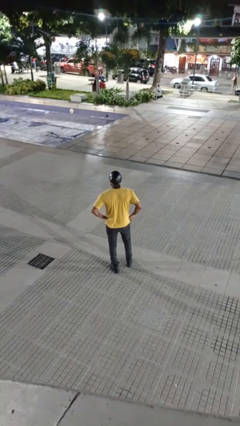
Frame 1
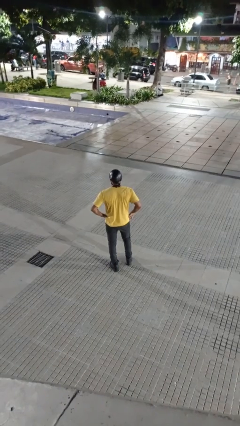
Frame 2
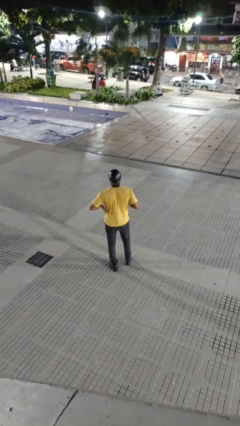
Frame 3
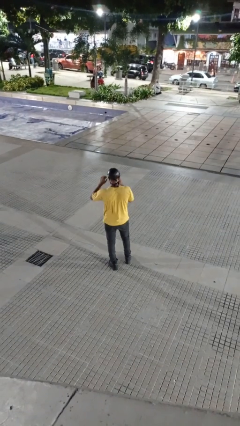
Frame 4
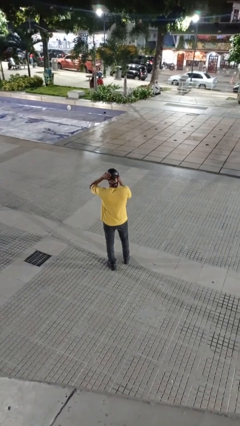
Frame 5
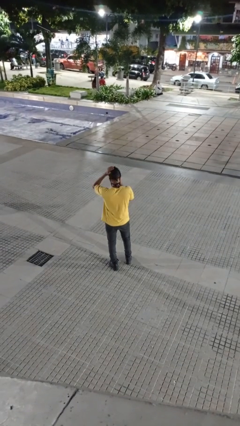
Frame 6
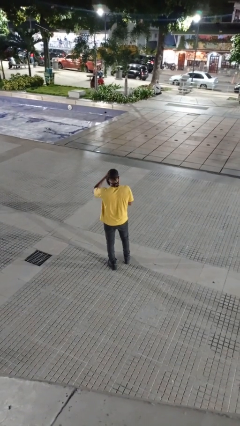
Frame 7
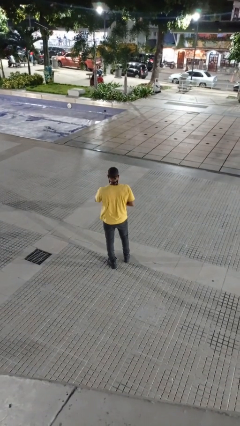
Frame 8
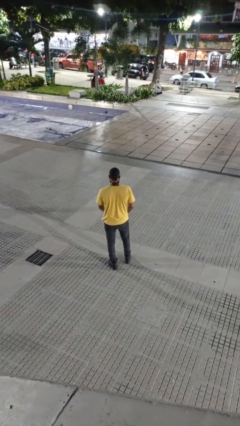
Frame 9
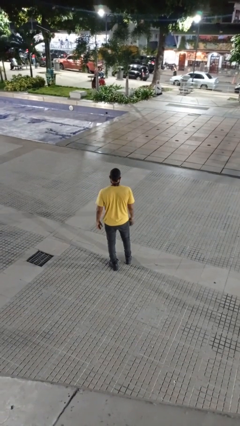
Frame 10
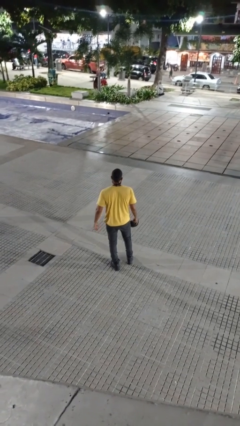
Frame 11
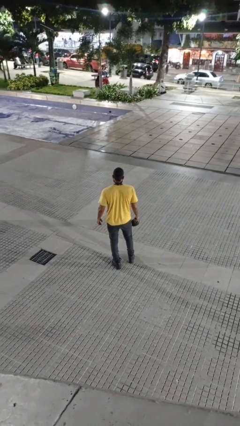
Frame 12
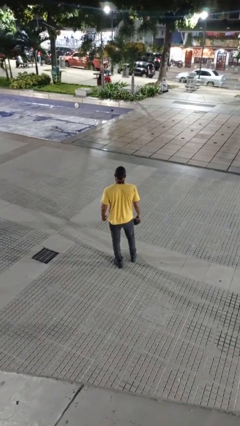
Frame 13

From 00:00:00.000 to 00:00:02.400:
person takes off hat

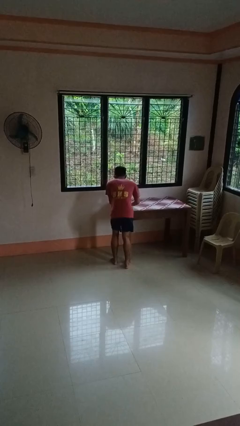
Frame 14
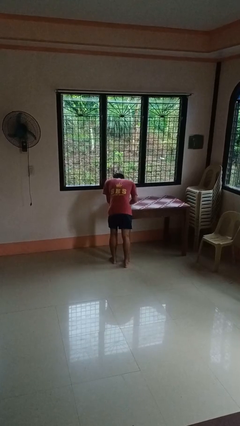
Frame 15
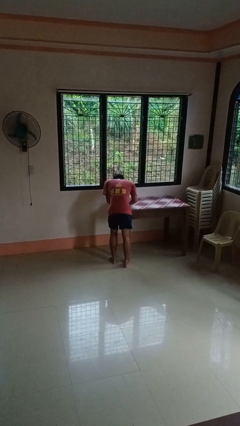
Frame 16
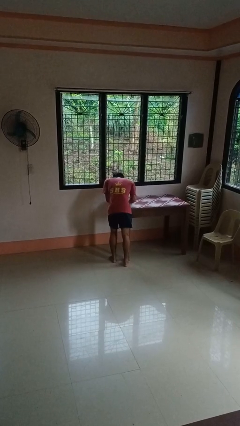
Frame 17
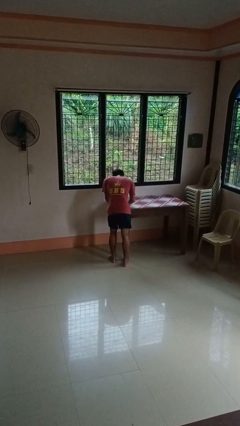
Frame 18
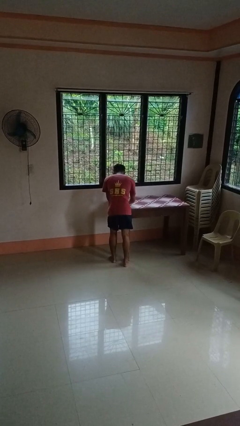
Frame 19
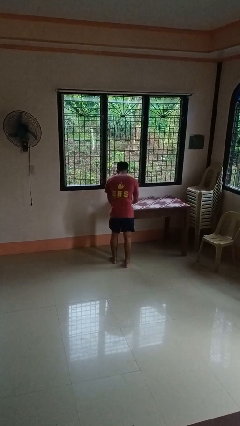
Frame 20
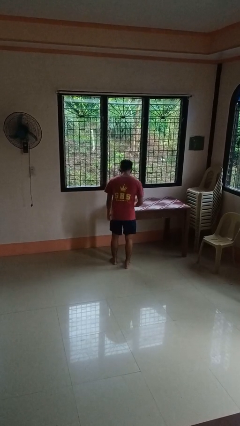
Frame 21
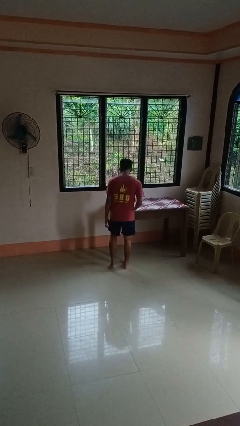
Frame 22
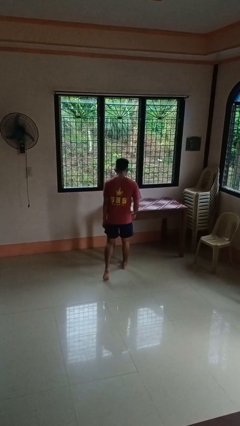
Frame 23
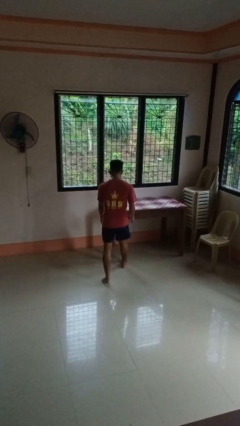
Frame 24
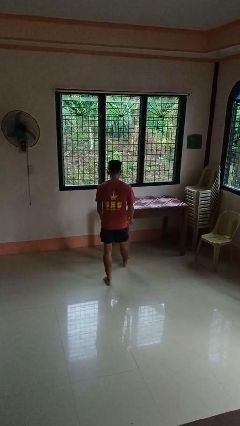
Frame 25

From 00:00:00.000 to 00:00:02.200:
person bumps into table

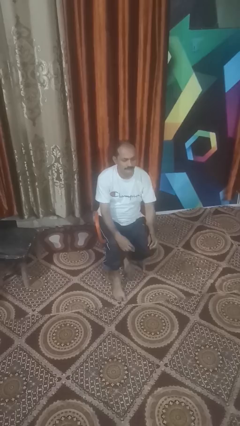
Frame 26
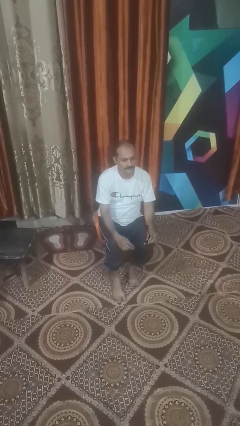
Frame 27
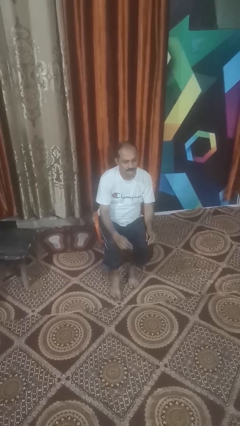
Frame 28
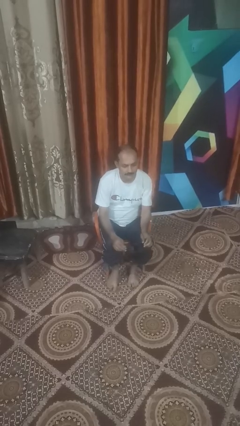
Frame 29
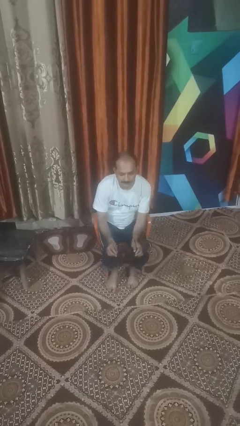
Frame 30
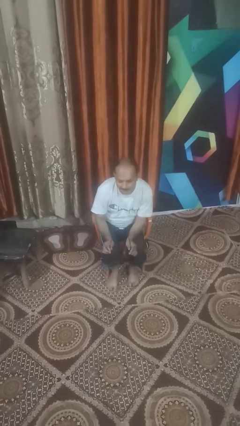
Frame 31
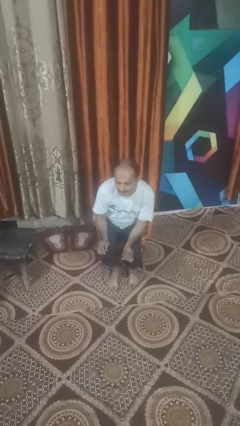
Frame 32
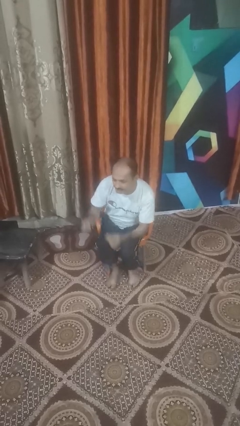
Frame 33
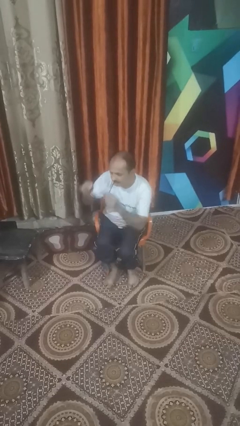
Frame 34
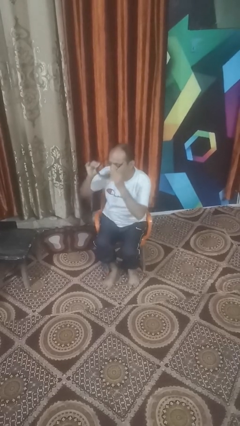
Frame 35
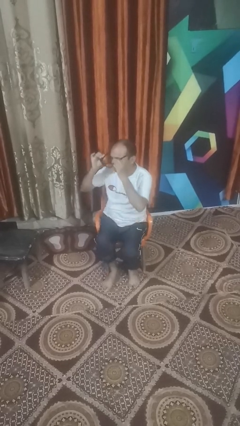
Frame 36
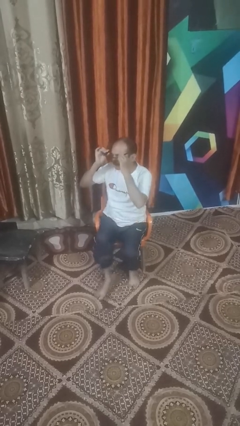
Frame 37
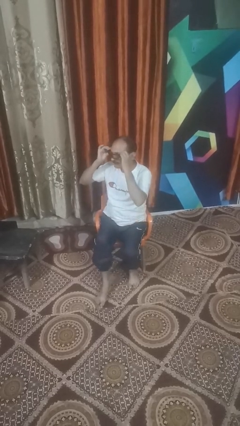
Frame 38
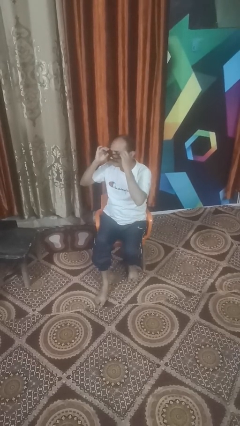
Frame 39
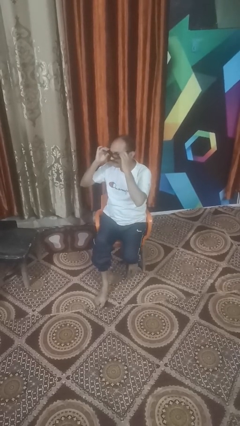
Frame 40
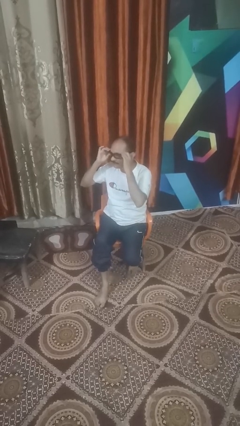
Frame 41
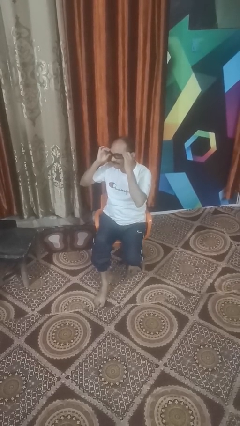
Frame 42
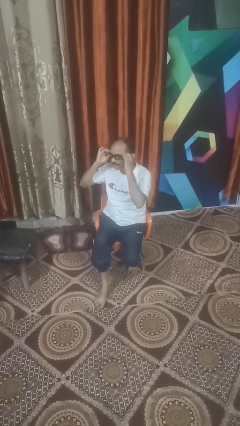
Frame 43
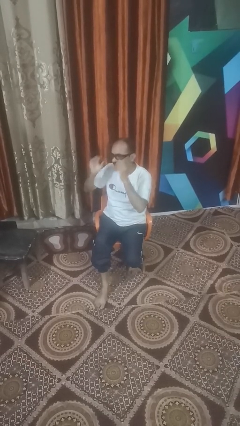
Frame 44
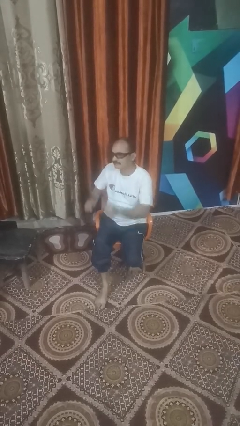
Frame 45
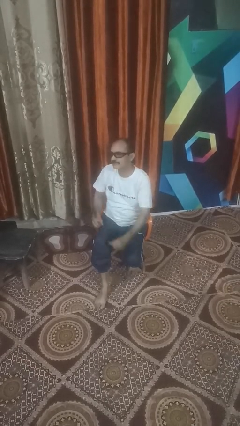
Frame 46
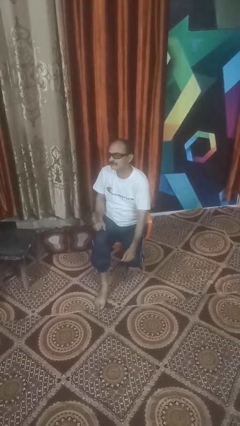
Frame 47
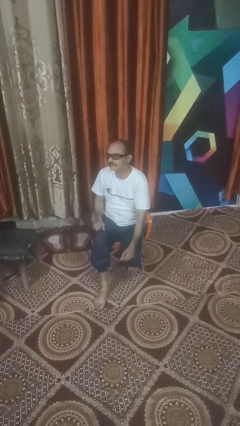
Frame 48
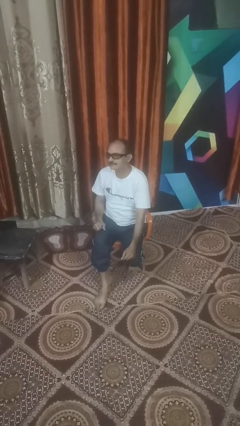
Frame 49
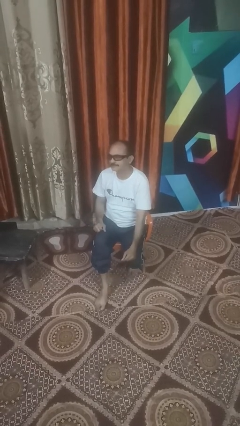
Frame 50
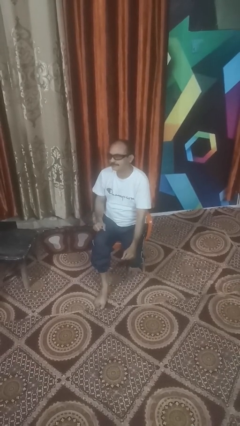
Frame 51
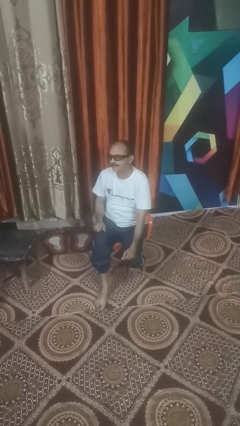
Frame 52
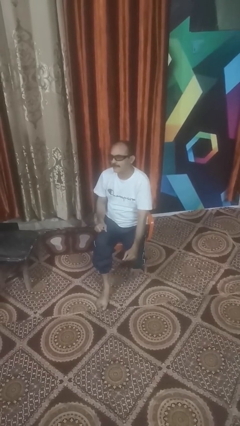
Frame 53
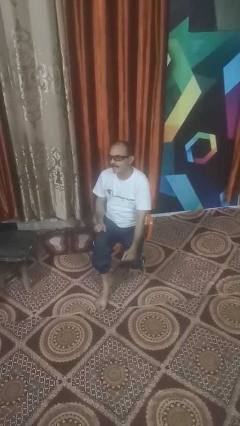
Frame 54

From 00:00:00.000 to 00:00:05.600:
person puts on sunglasses

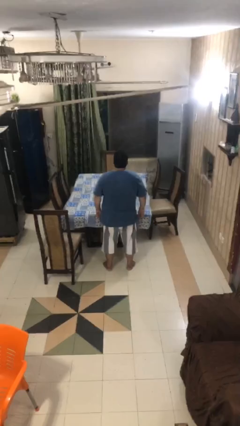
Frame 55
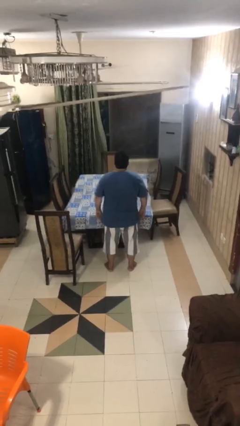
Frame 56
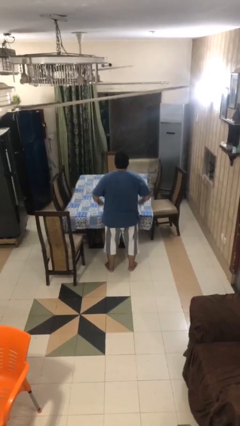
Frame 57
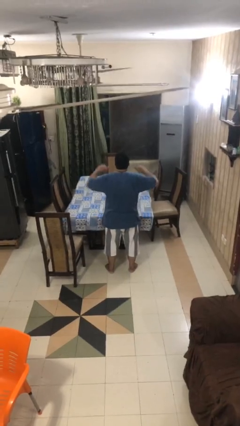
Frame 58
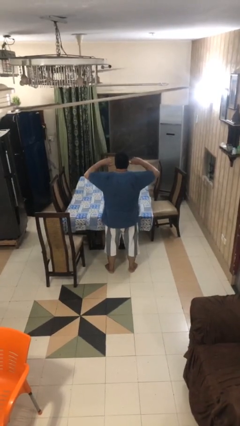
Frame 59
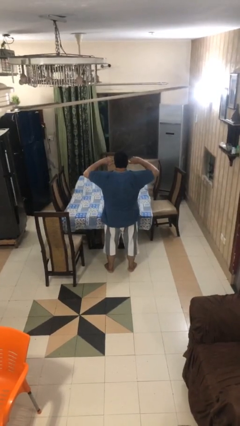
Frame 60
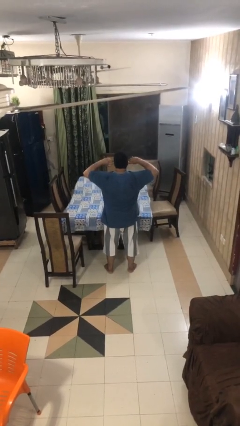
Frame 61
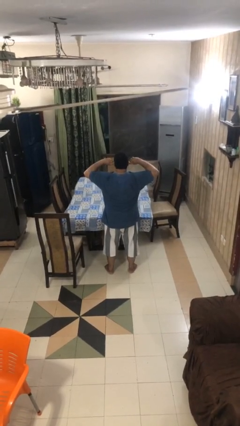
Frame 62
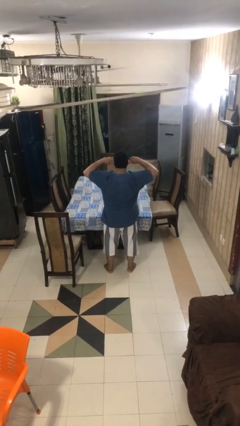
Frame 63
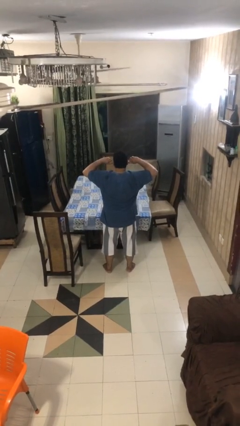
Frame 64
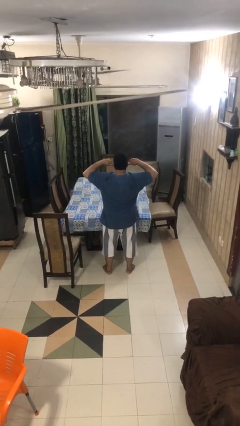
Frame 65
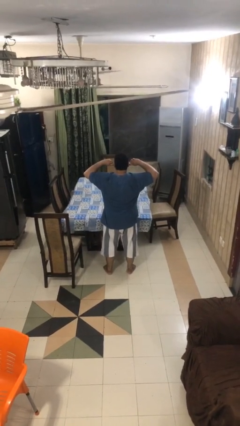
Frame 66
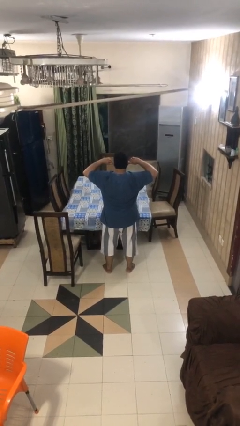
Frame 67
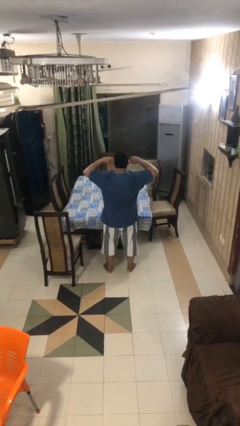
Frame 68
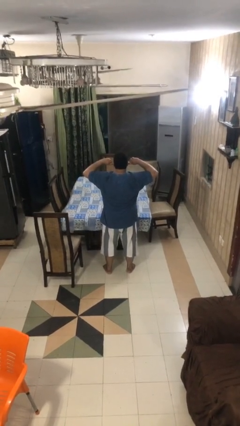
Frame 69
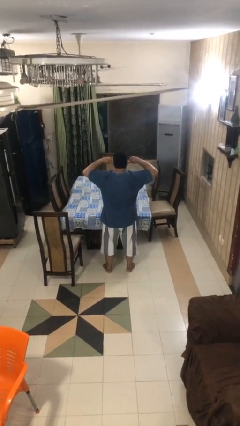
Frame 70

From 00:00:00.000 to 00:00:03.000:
person puts fingers in ear

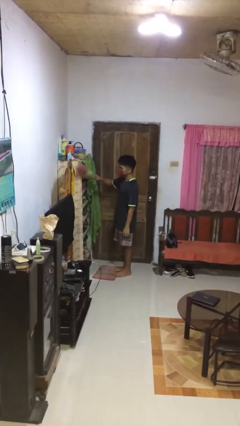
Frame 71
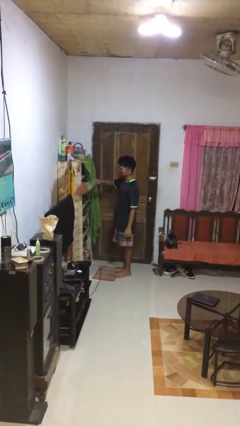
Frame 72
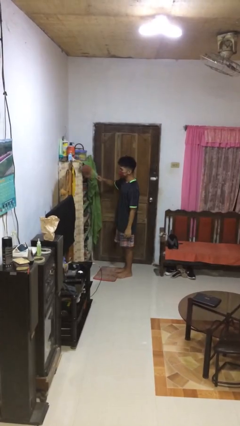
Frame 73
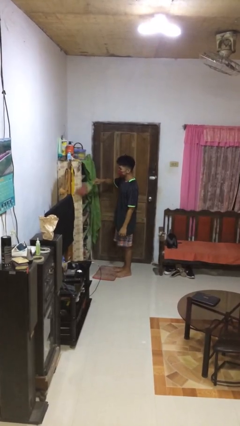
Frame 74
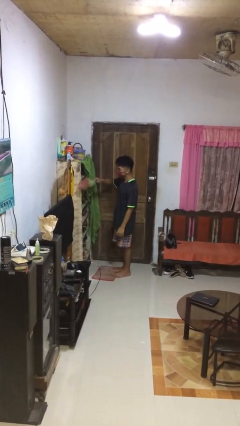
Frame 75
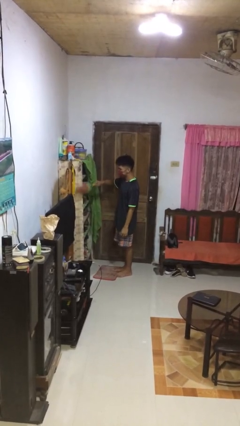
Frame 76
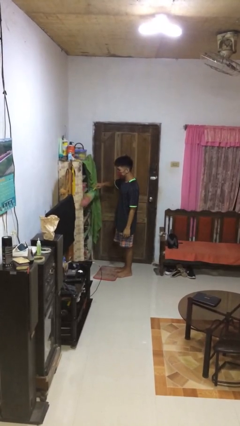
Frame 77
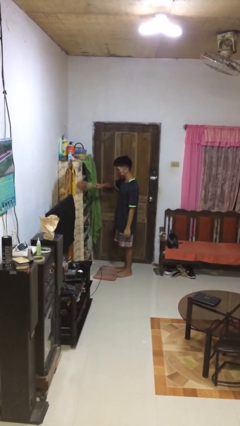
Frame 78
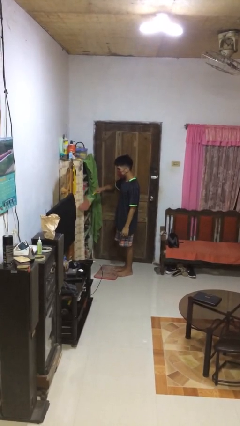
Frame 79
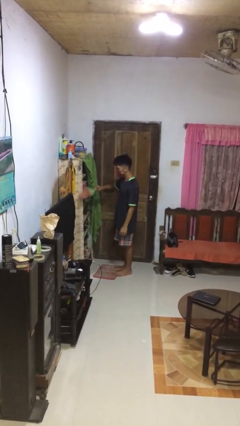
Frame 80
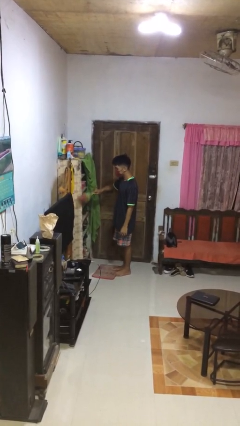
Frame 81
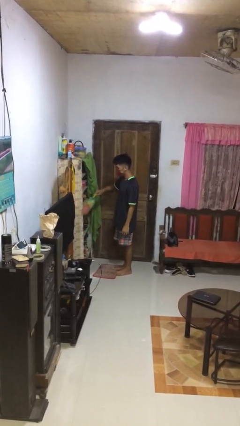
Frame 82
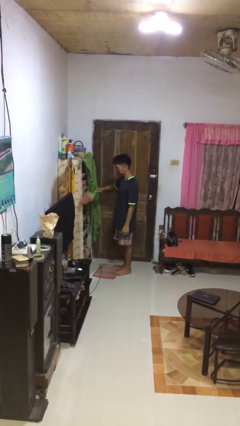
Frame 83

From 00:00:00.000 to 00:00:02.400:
person dusts furniture

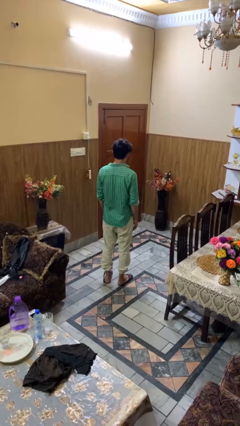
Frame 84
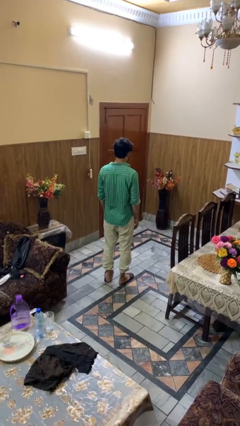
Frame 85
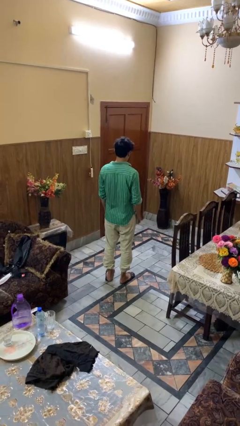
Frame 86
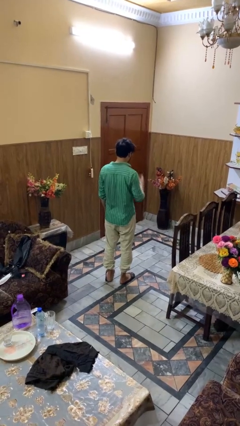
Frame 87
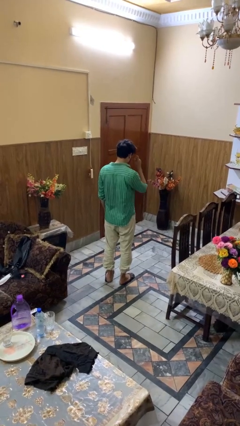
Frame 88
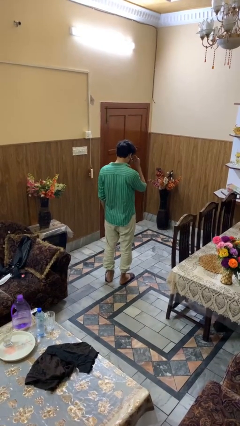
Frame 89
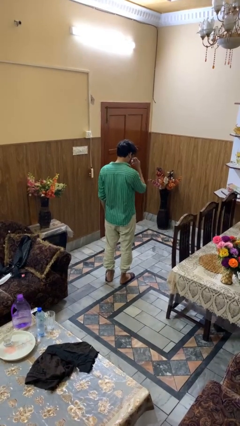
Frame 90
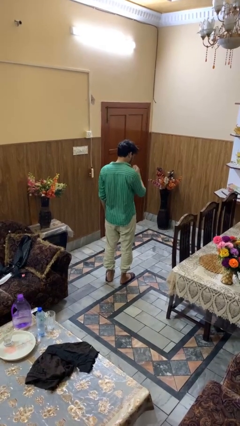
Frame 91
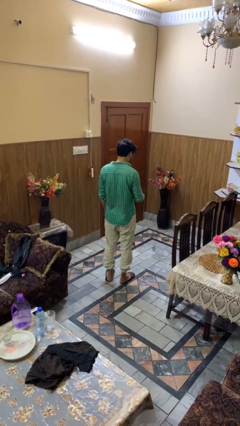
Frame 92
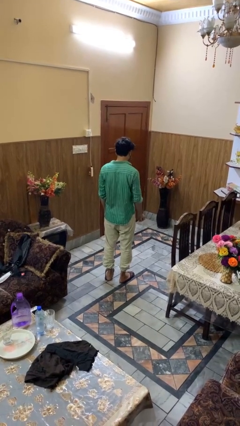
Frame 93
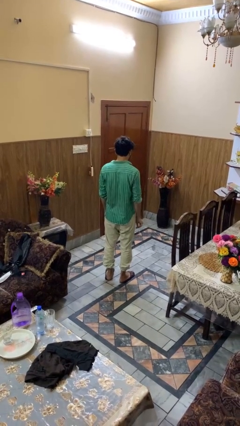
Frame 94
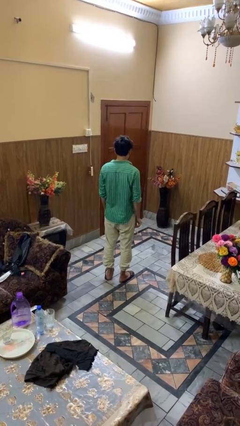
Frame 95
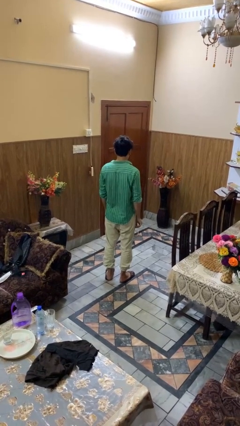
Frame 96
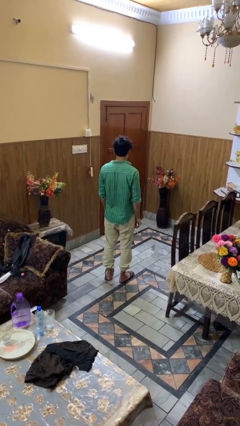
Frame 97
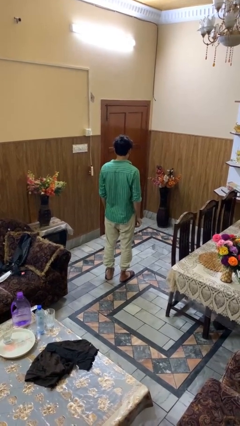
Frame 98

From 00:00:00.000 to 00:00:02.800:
person takes off glasses
